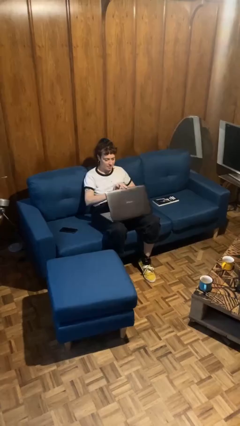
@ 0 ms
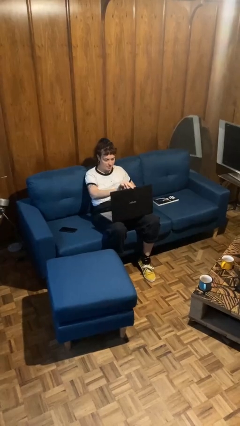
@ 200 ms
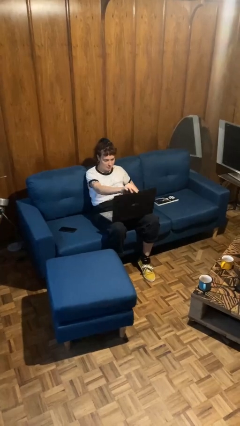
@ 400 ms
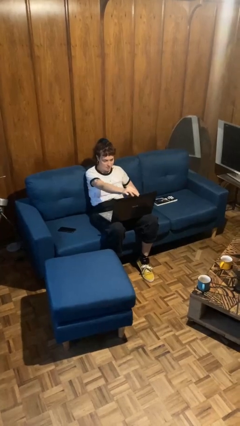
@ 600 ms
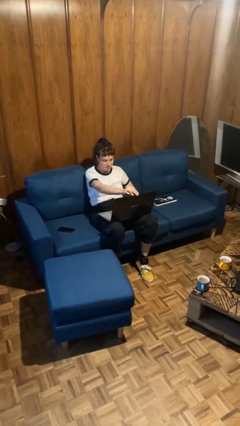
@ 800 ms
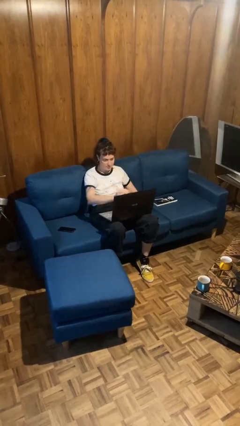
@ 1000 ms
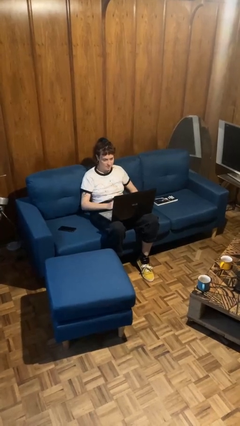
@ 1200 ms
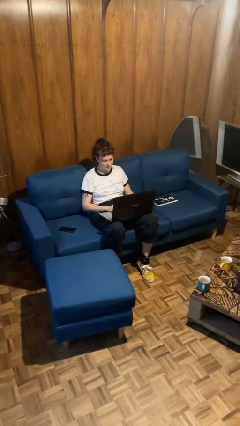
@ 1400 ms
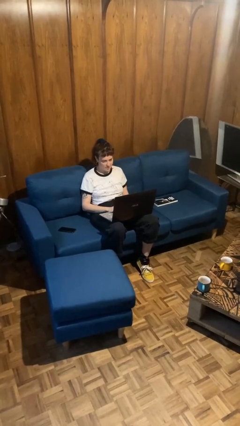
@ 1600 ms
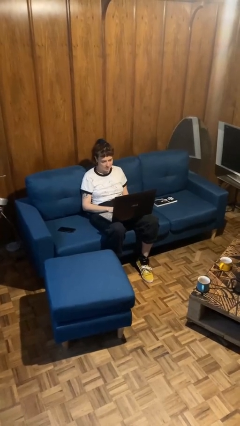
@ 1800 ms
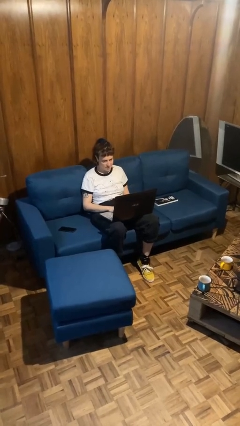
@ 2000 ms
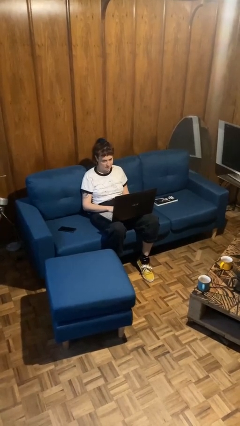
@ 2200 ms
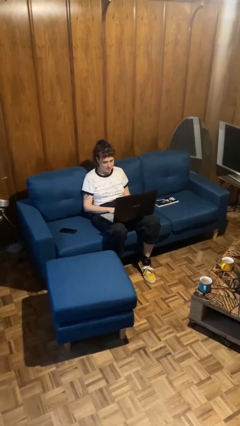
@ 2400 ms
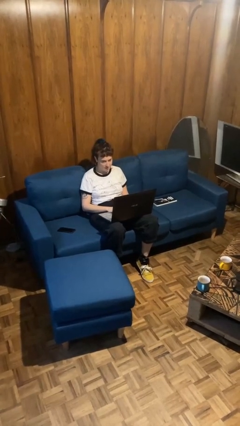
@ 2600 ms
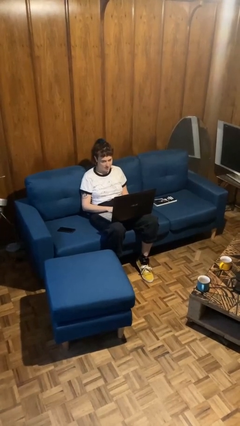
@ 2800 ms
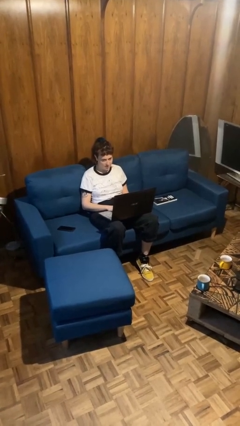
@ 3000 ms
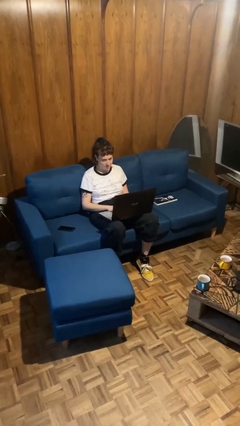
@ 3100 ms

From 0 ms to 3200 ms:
person interacts with laptop

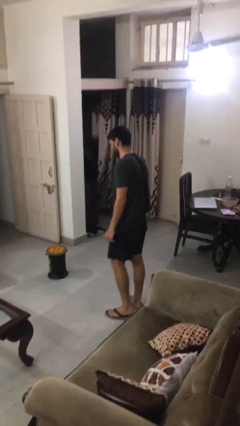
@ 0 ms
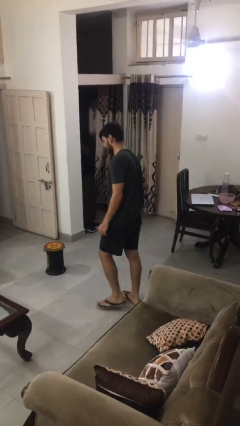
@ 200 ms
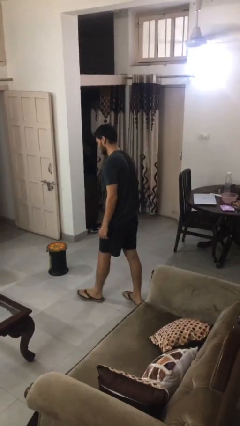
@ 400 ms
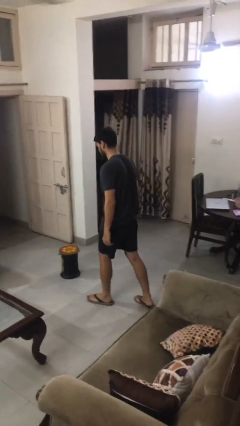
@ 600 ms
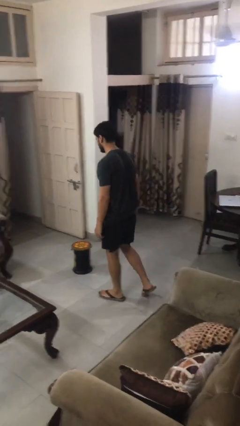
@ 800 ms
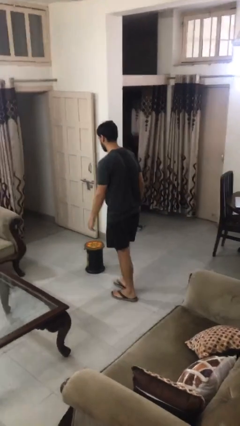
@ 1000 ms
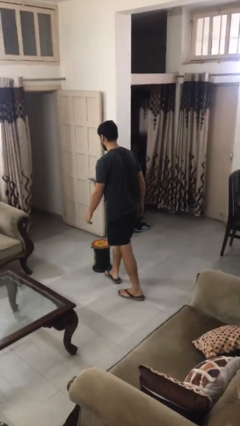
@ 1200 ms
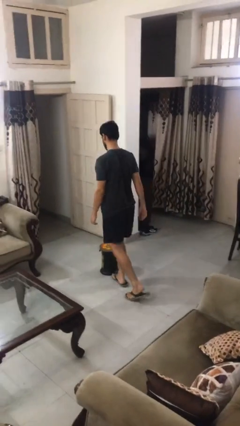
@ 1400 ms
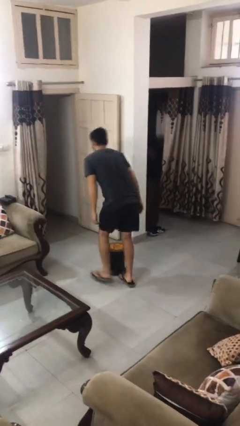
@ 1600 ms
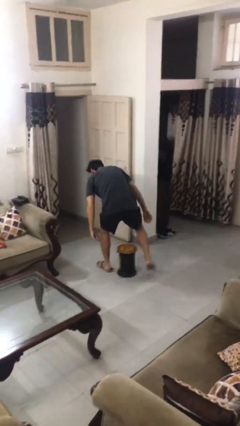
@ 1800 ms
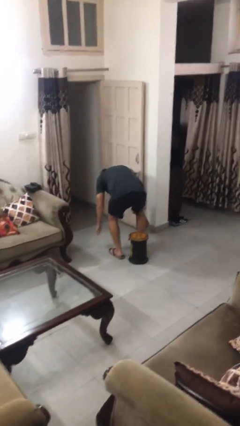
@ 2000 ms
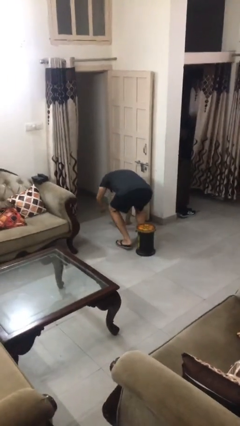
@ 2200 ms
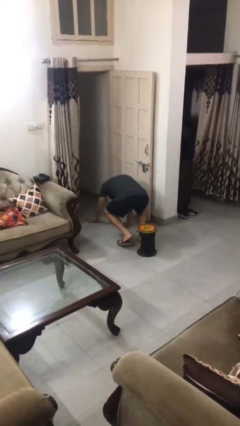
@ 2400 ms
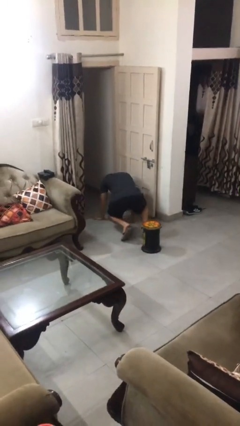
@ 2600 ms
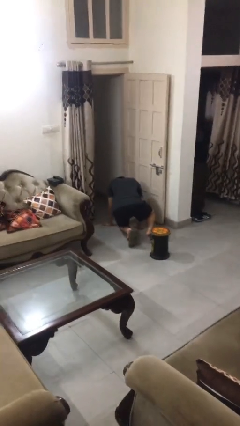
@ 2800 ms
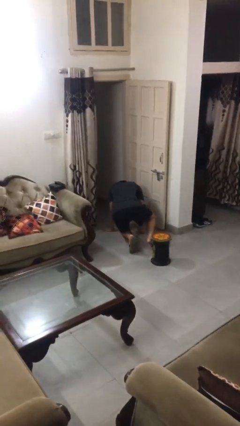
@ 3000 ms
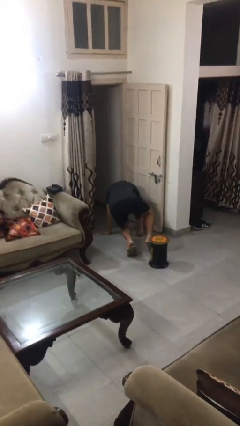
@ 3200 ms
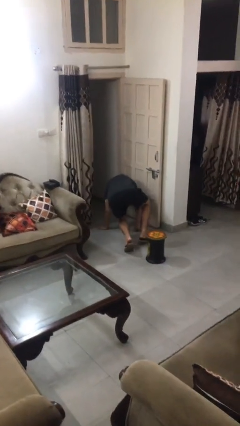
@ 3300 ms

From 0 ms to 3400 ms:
person trips on object on floor

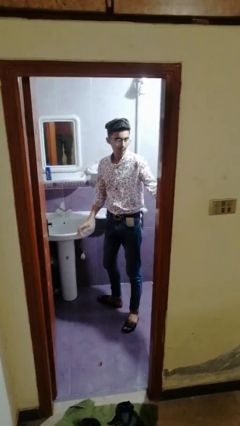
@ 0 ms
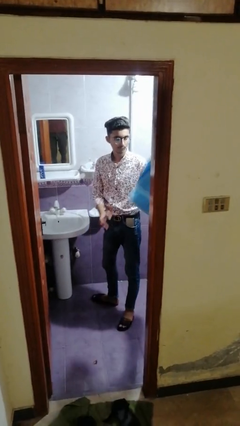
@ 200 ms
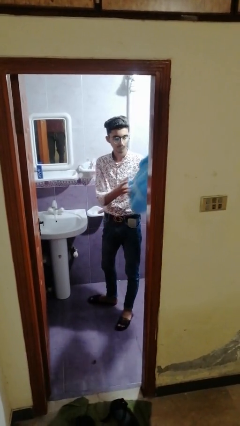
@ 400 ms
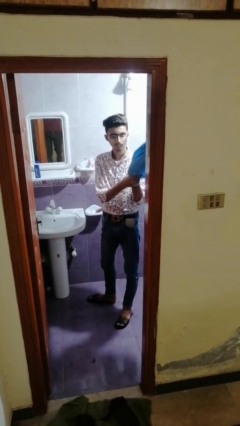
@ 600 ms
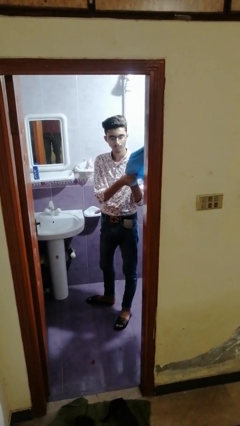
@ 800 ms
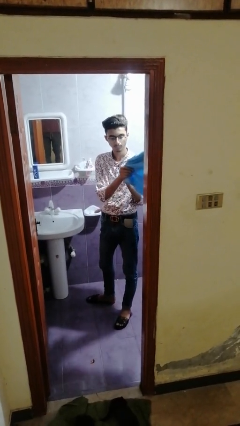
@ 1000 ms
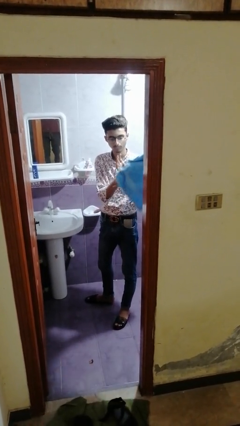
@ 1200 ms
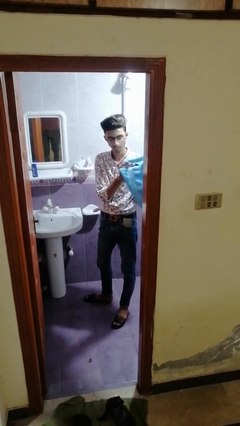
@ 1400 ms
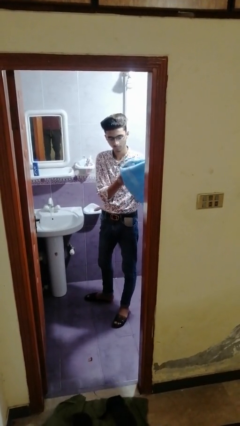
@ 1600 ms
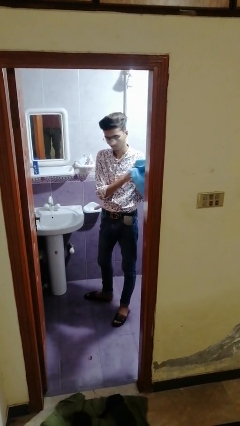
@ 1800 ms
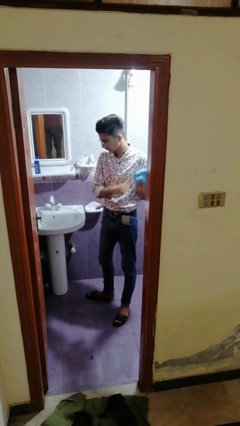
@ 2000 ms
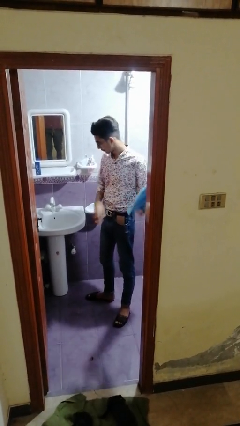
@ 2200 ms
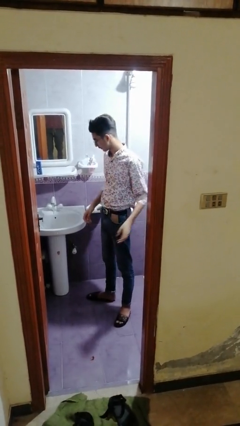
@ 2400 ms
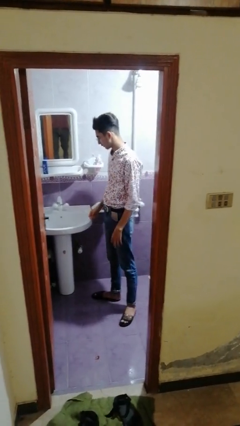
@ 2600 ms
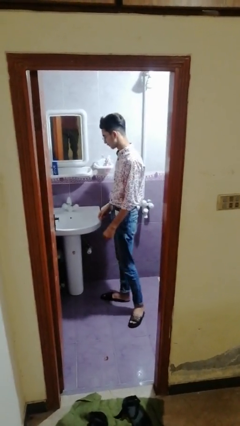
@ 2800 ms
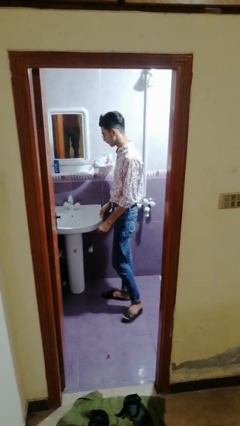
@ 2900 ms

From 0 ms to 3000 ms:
person dries hands with towel

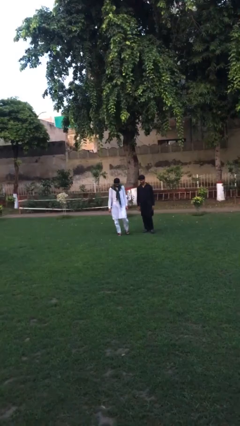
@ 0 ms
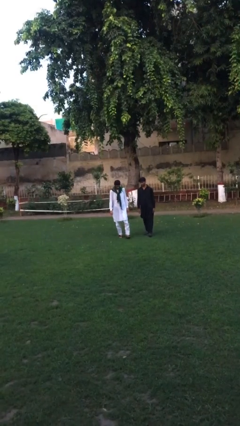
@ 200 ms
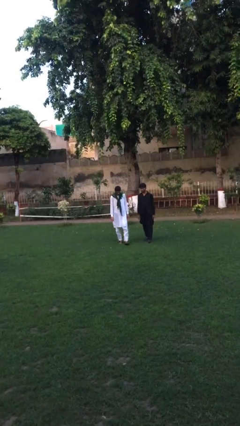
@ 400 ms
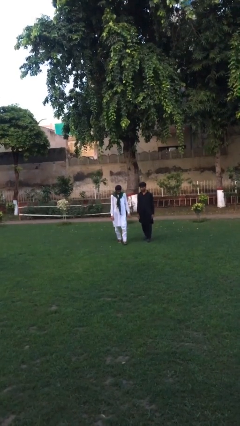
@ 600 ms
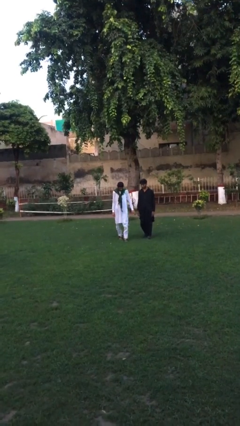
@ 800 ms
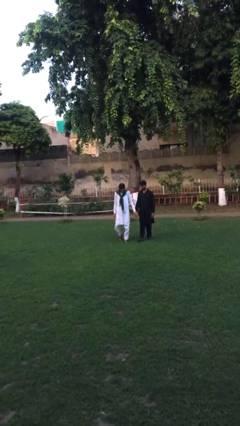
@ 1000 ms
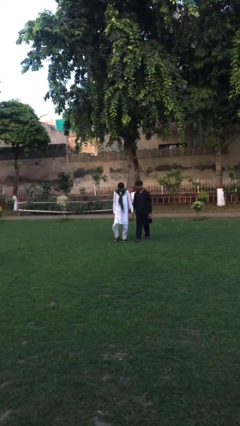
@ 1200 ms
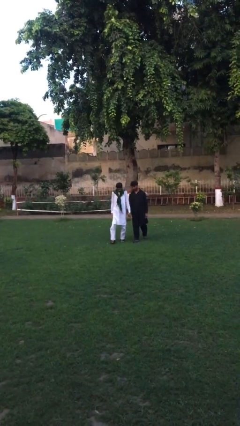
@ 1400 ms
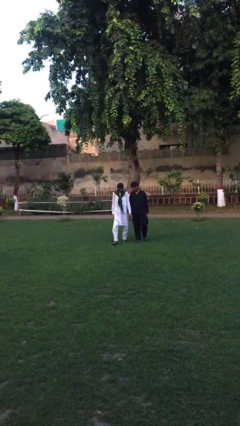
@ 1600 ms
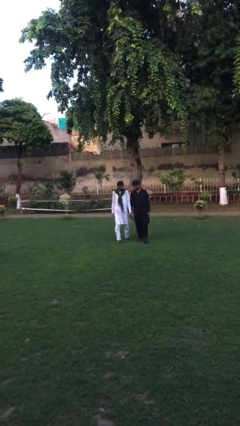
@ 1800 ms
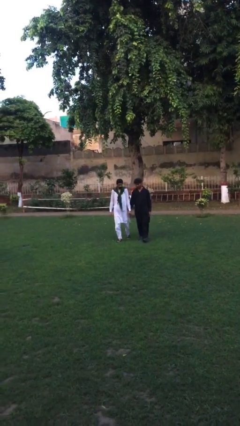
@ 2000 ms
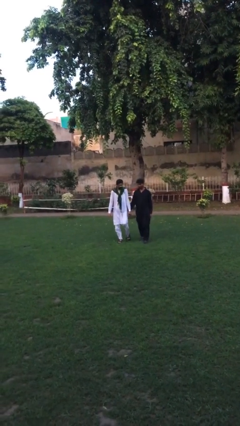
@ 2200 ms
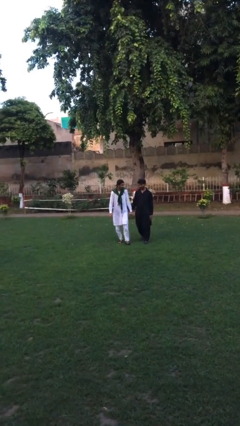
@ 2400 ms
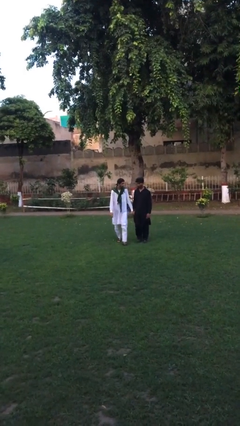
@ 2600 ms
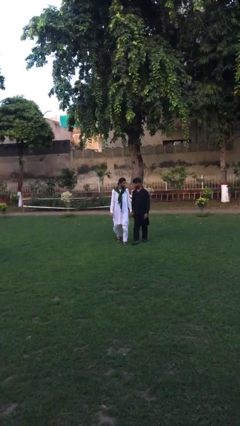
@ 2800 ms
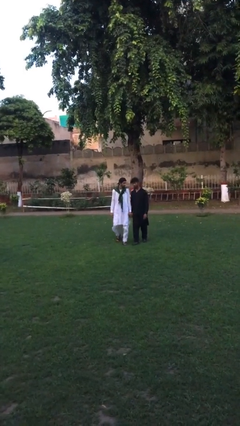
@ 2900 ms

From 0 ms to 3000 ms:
person holds hand

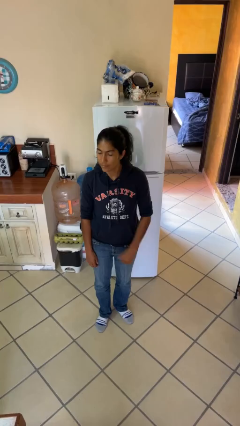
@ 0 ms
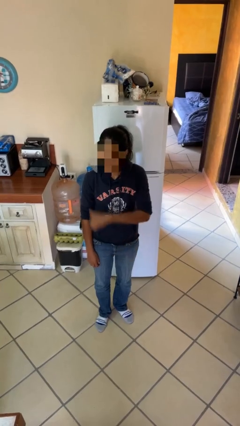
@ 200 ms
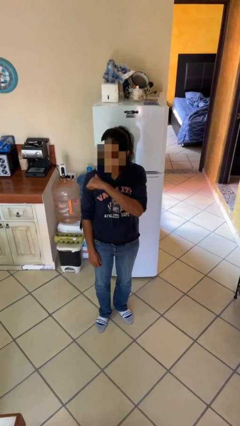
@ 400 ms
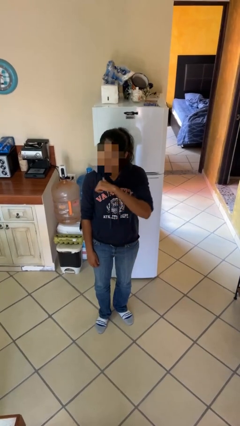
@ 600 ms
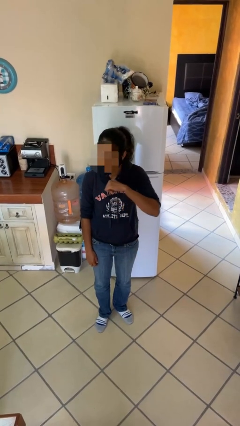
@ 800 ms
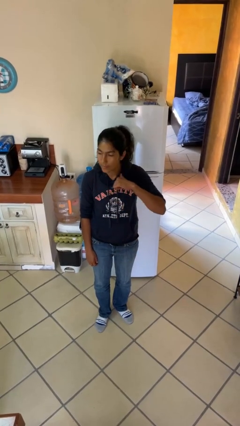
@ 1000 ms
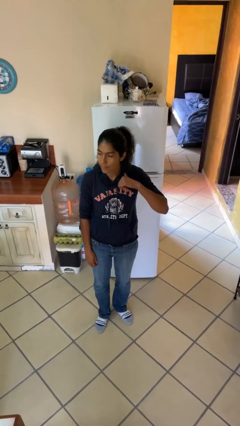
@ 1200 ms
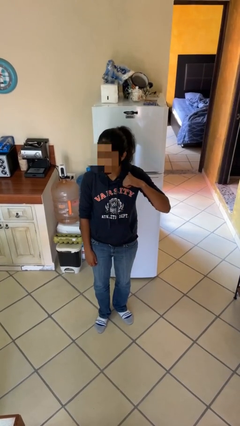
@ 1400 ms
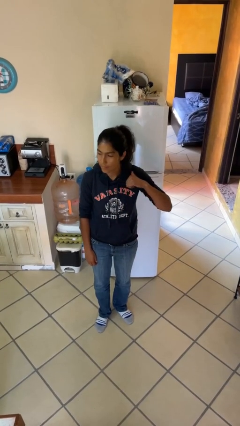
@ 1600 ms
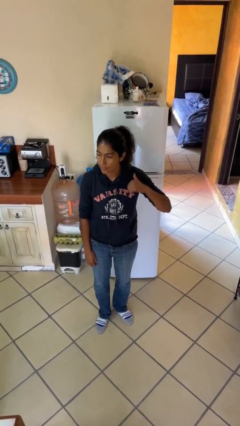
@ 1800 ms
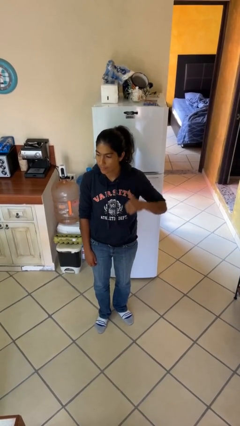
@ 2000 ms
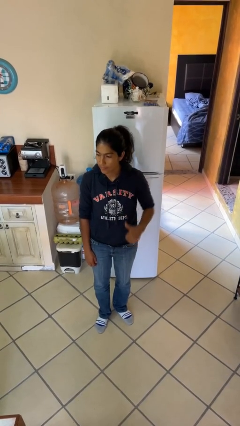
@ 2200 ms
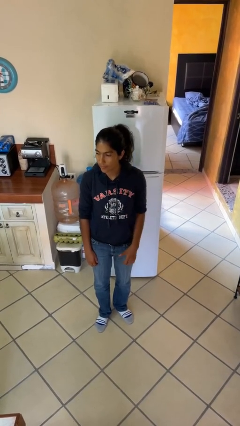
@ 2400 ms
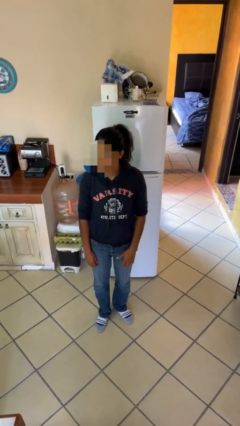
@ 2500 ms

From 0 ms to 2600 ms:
person gestures cut

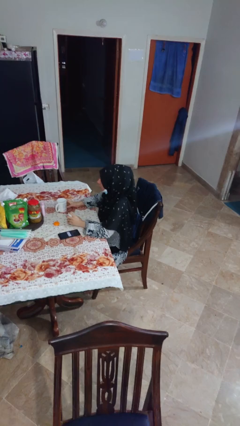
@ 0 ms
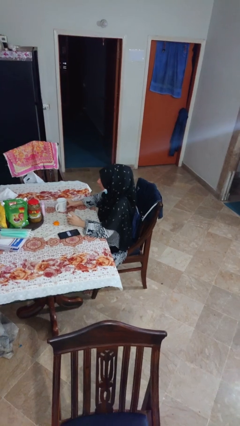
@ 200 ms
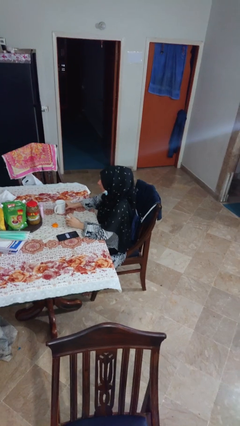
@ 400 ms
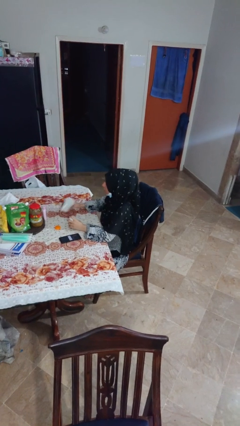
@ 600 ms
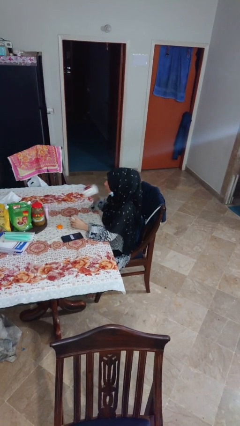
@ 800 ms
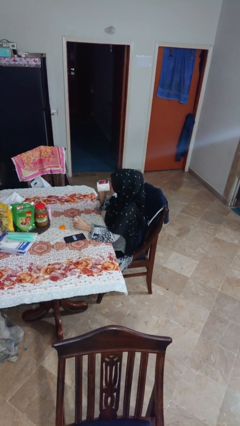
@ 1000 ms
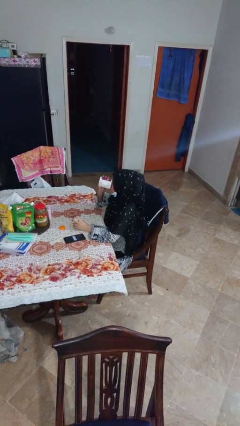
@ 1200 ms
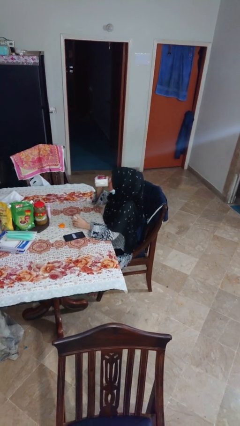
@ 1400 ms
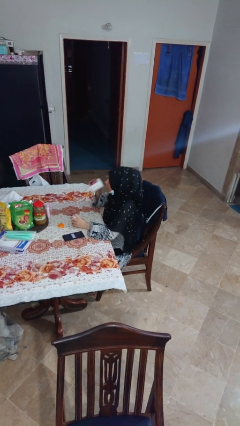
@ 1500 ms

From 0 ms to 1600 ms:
person drinks from cup

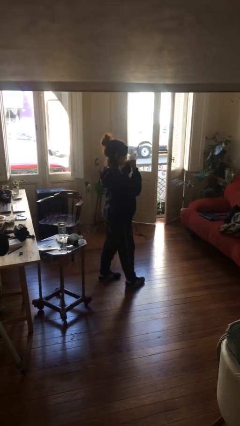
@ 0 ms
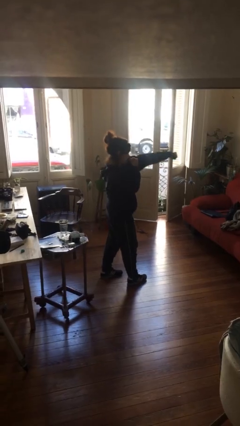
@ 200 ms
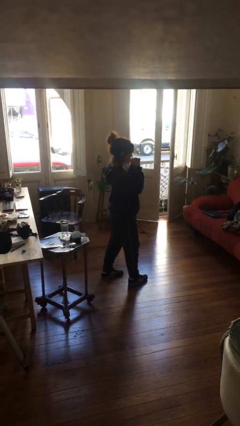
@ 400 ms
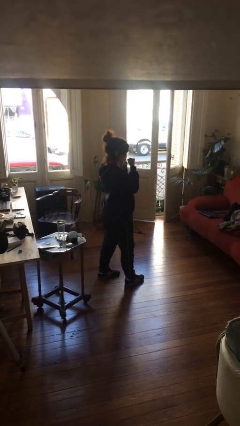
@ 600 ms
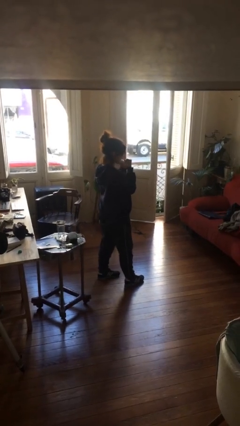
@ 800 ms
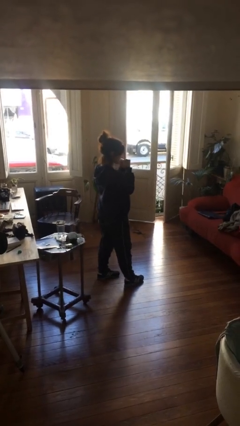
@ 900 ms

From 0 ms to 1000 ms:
person punches
